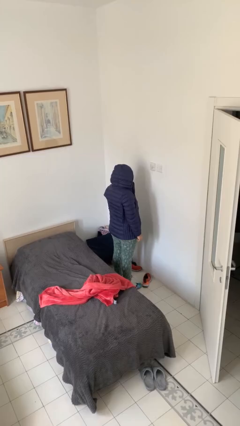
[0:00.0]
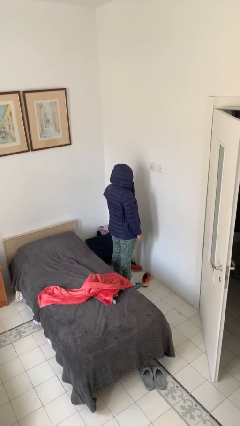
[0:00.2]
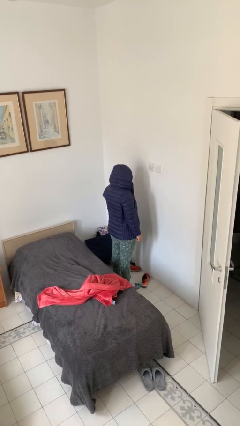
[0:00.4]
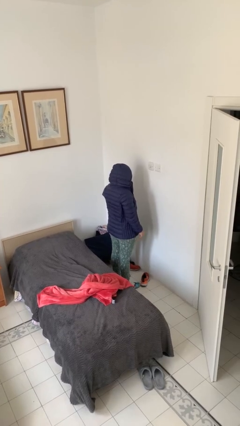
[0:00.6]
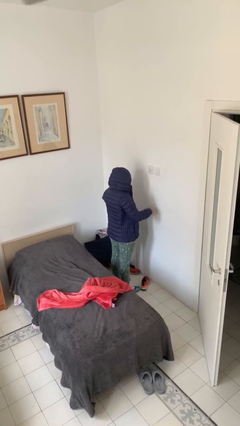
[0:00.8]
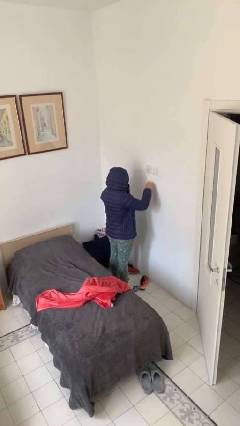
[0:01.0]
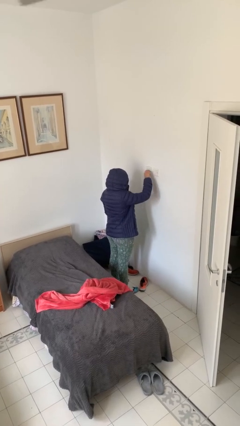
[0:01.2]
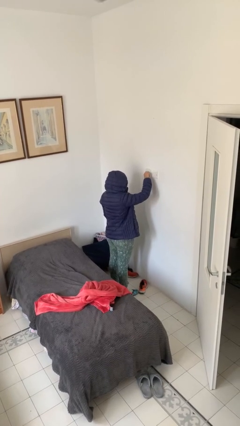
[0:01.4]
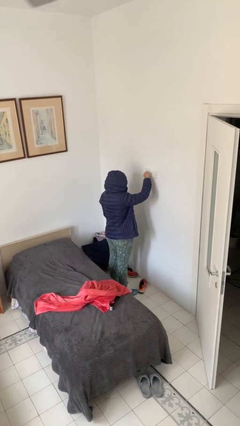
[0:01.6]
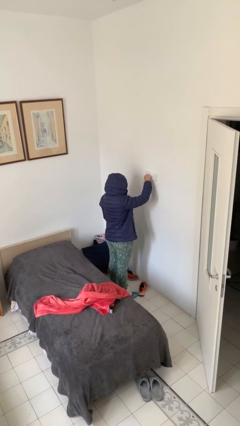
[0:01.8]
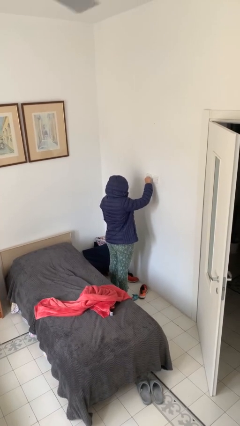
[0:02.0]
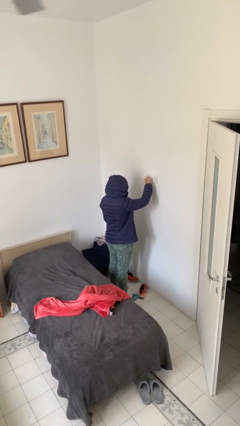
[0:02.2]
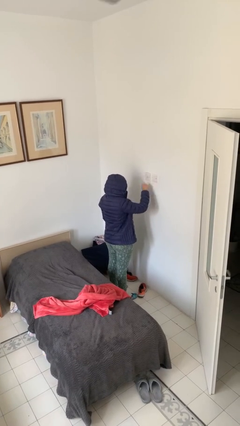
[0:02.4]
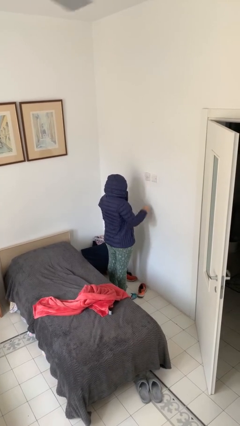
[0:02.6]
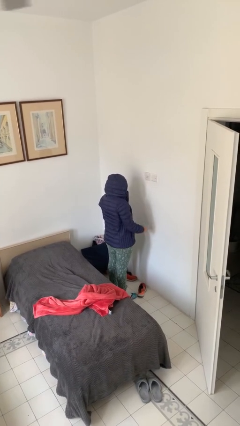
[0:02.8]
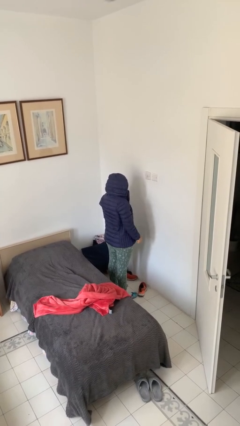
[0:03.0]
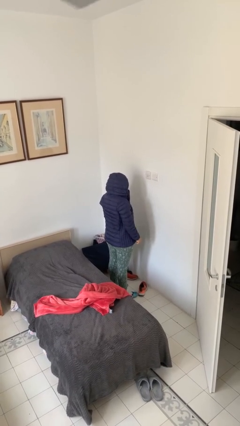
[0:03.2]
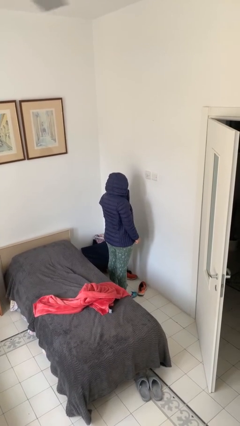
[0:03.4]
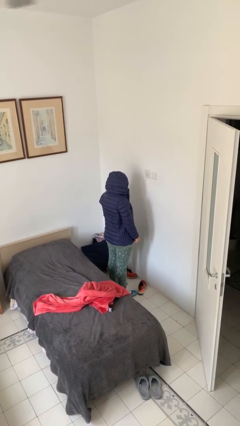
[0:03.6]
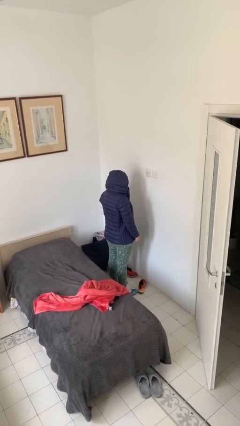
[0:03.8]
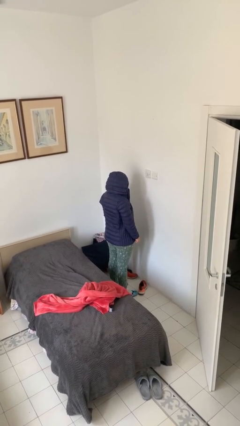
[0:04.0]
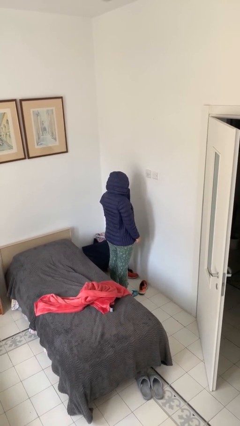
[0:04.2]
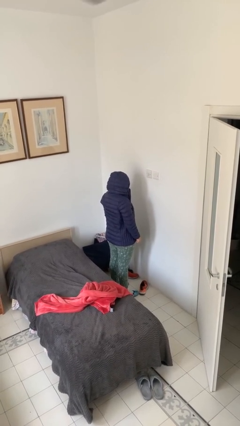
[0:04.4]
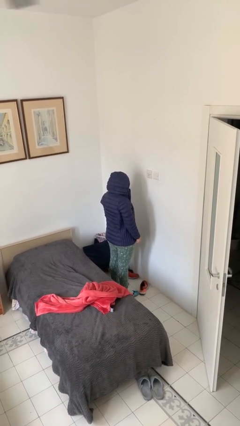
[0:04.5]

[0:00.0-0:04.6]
person turns on fan

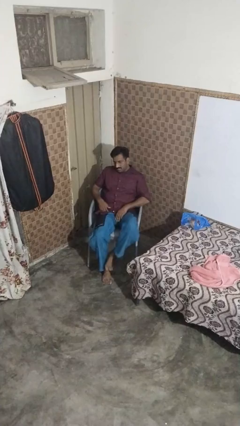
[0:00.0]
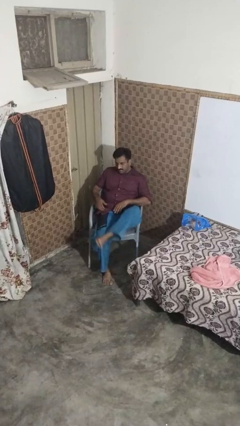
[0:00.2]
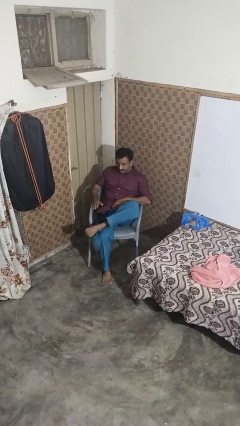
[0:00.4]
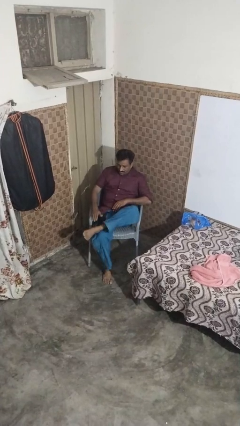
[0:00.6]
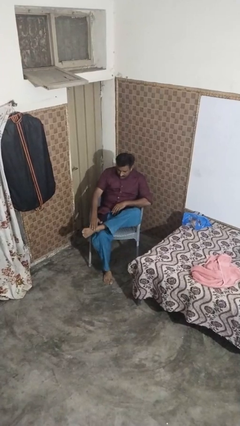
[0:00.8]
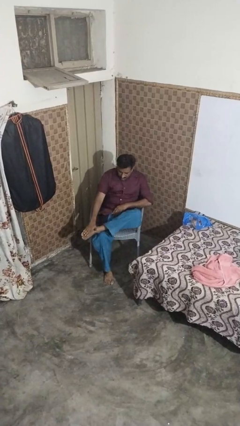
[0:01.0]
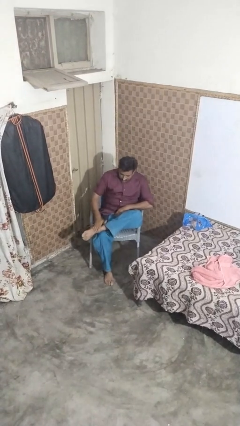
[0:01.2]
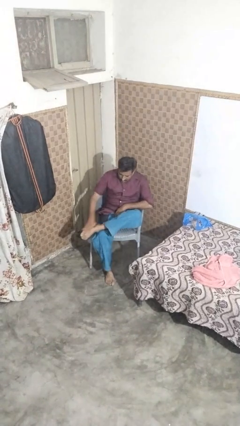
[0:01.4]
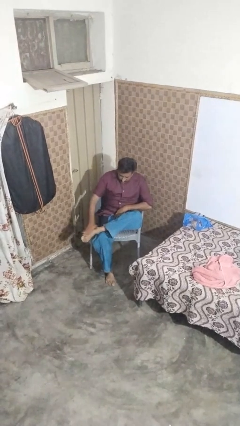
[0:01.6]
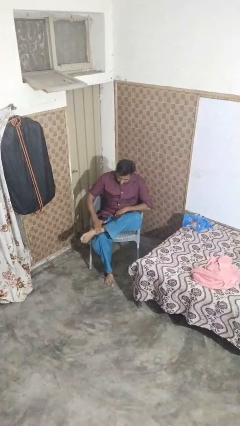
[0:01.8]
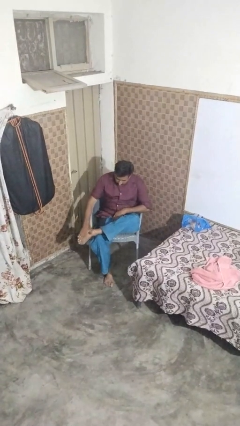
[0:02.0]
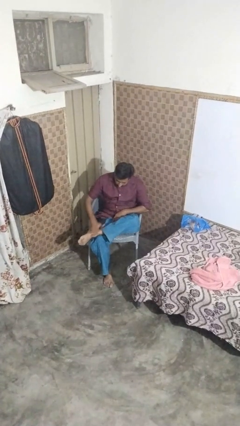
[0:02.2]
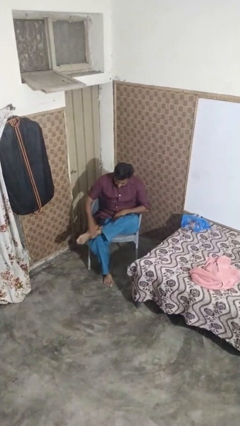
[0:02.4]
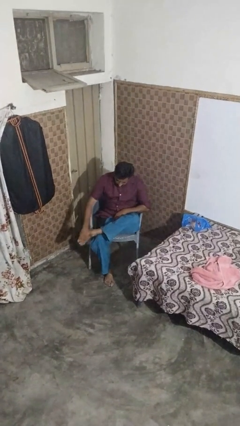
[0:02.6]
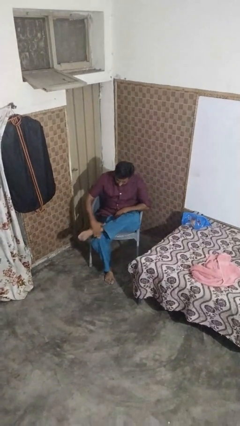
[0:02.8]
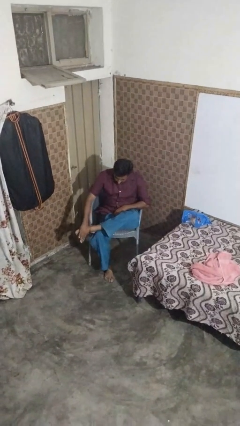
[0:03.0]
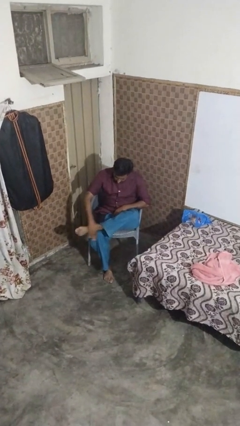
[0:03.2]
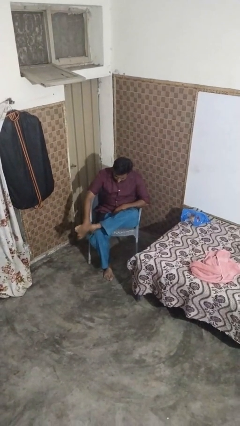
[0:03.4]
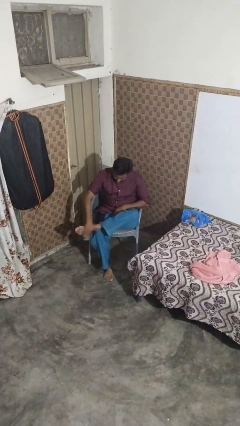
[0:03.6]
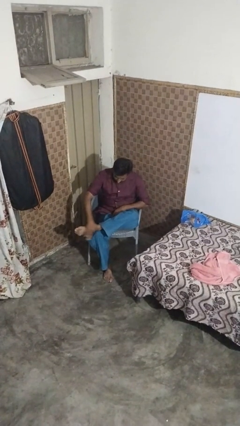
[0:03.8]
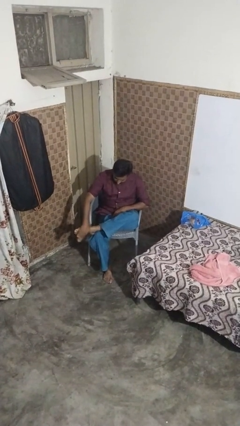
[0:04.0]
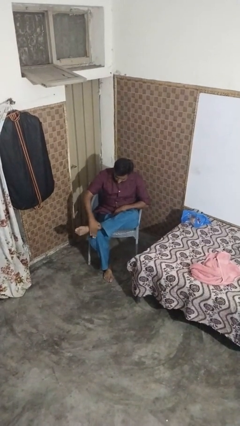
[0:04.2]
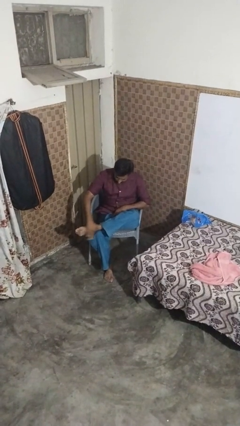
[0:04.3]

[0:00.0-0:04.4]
person rubs foot

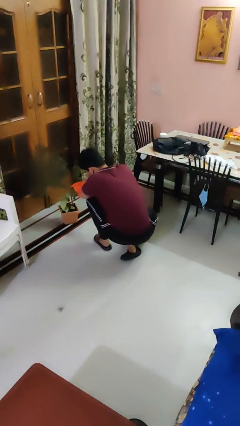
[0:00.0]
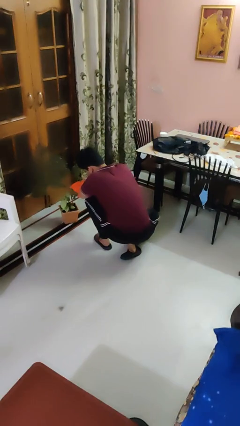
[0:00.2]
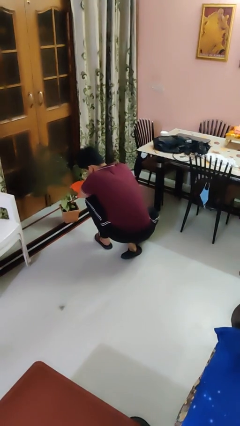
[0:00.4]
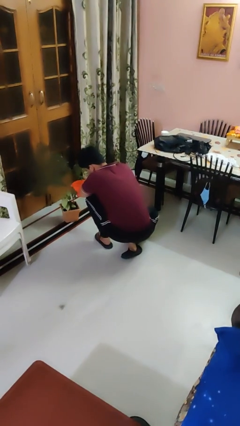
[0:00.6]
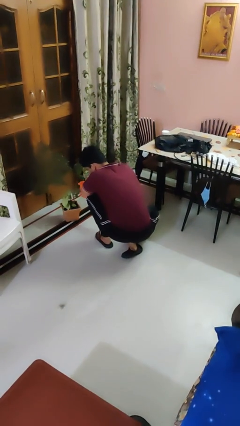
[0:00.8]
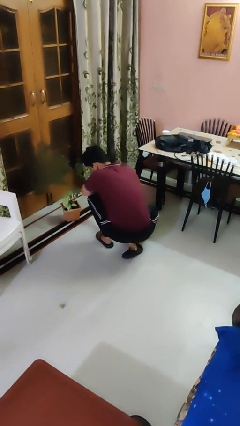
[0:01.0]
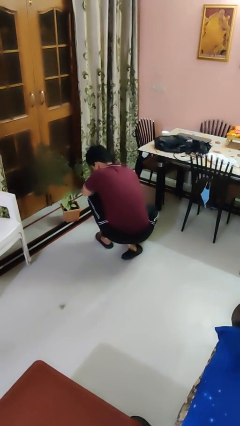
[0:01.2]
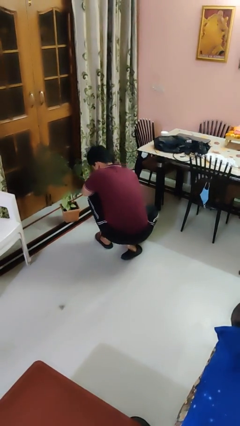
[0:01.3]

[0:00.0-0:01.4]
person waters houseplant

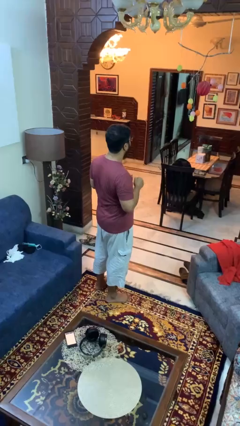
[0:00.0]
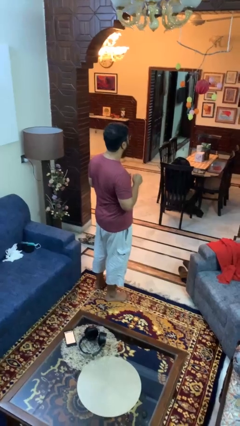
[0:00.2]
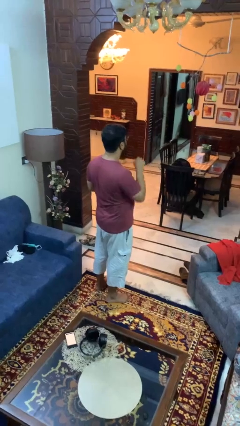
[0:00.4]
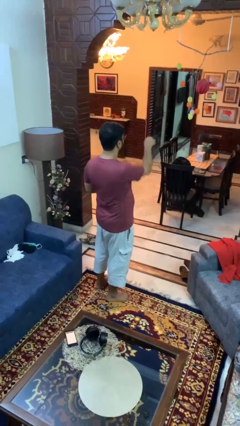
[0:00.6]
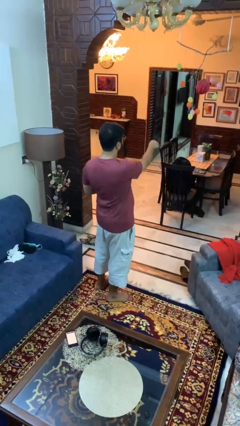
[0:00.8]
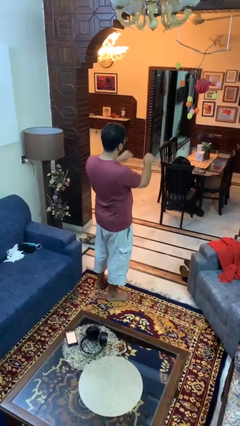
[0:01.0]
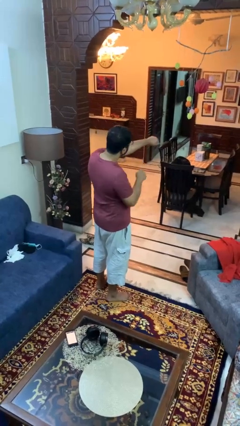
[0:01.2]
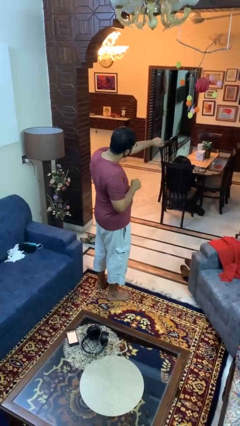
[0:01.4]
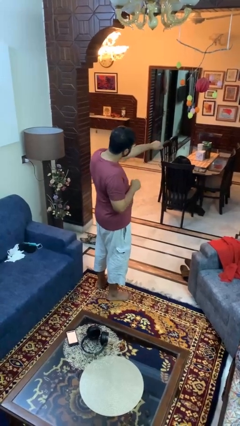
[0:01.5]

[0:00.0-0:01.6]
person punches

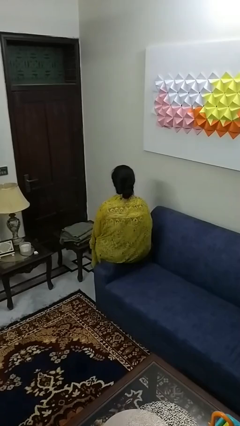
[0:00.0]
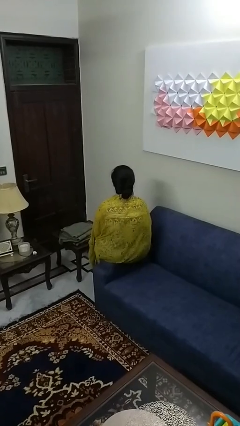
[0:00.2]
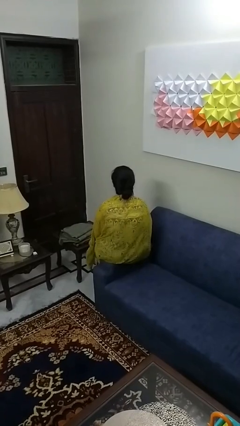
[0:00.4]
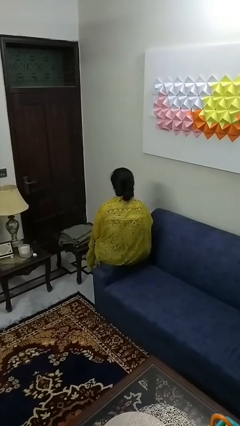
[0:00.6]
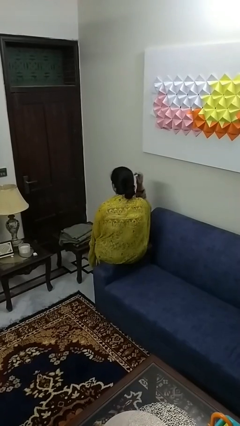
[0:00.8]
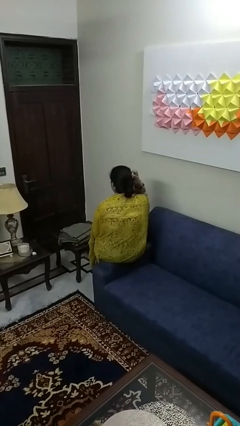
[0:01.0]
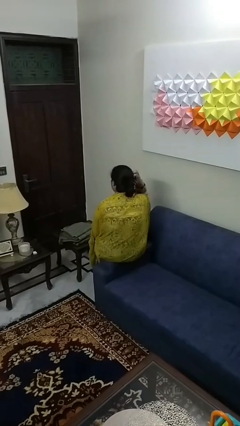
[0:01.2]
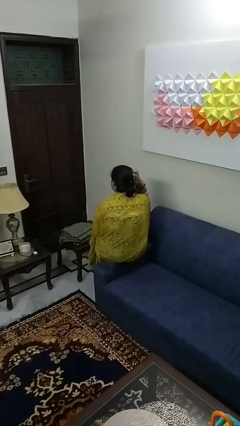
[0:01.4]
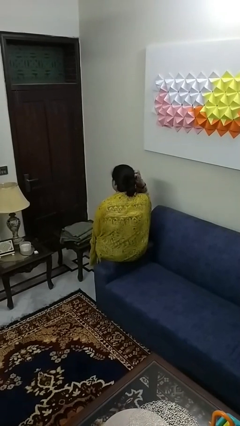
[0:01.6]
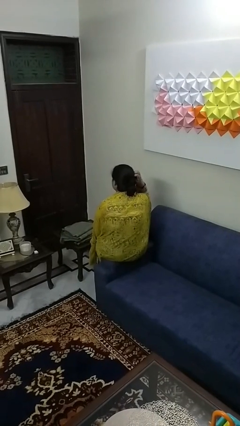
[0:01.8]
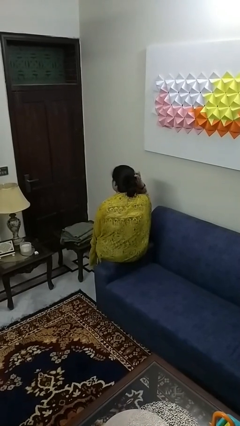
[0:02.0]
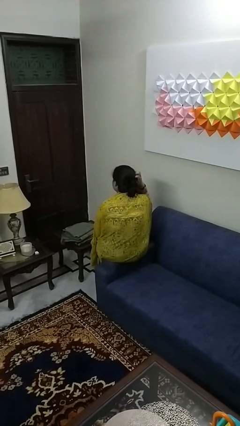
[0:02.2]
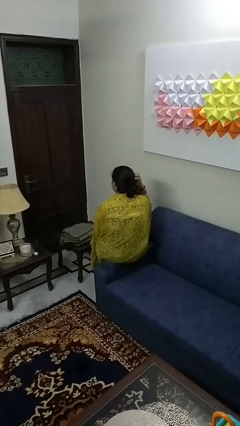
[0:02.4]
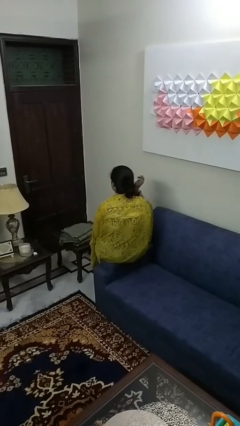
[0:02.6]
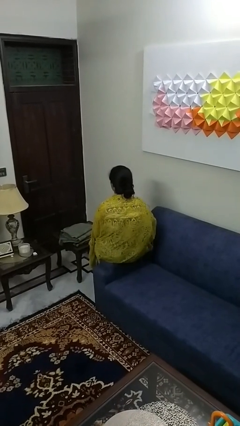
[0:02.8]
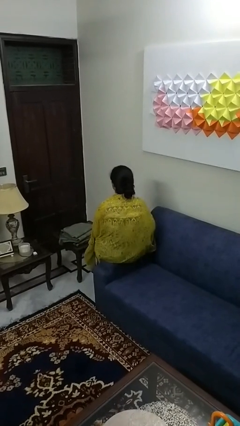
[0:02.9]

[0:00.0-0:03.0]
person scratches face

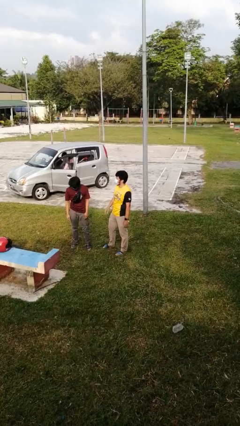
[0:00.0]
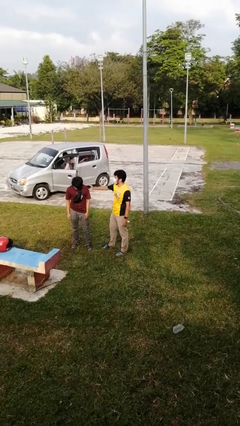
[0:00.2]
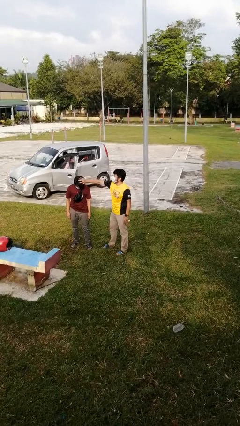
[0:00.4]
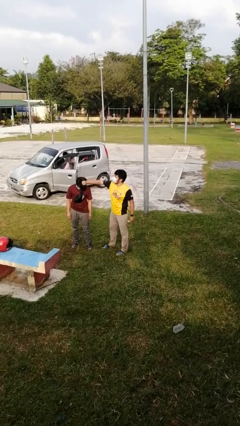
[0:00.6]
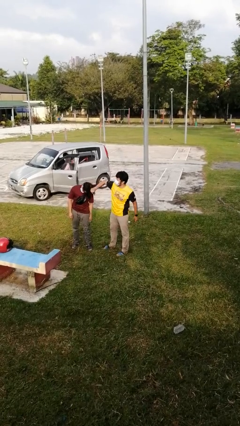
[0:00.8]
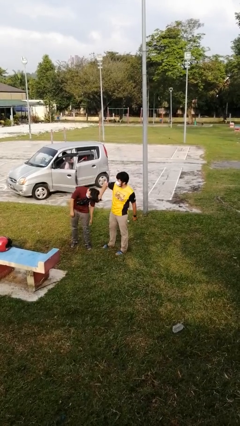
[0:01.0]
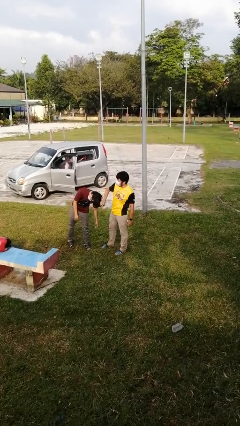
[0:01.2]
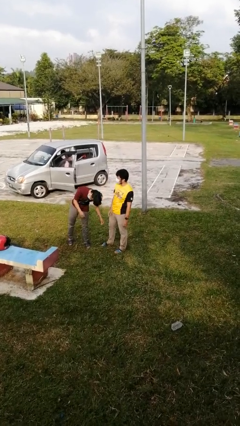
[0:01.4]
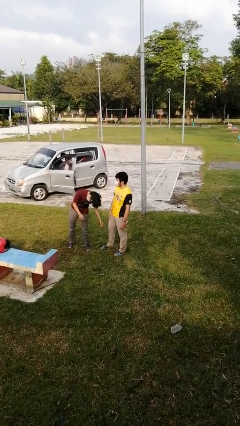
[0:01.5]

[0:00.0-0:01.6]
person grabs person by hair

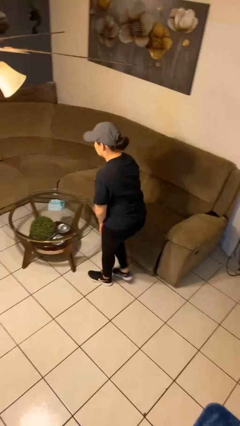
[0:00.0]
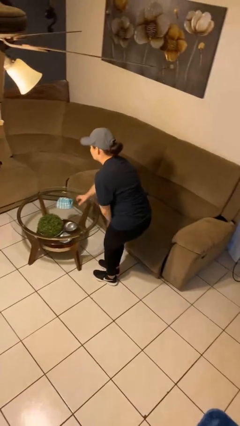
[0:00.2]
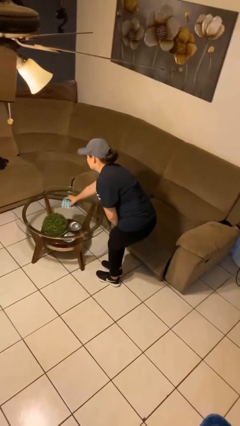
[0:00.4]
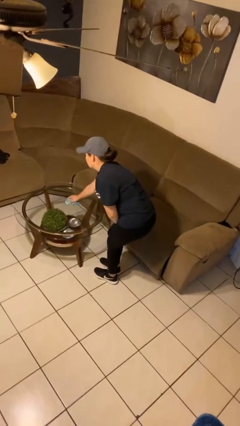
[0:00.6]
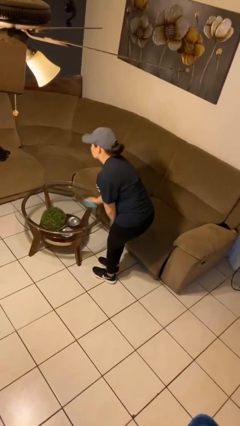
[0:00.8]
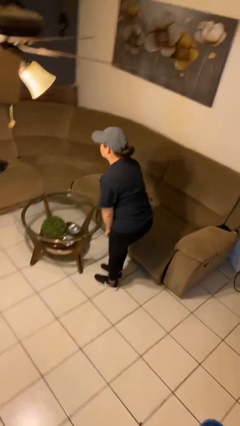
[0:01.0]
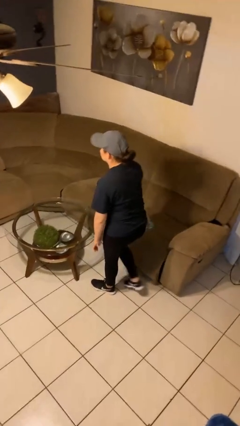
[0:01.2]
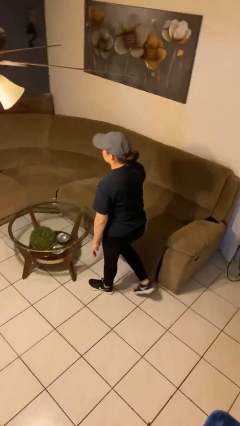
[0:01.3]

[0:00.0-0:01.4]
person picks up object from table
